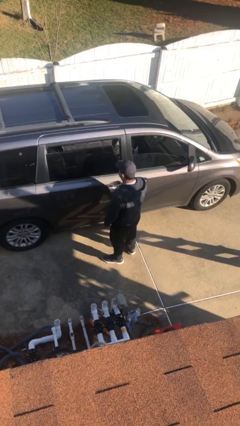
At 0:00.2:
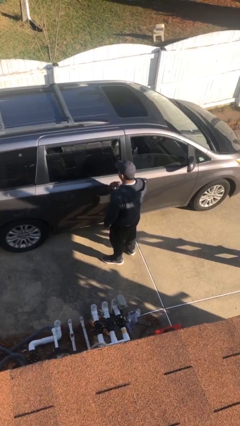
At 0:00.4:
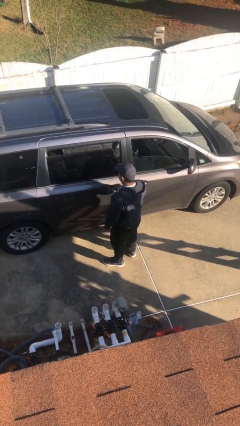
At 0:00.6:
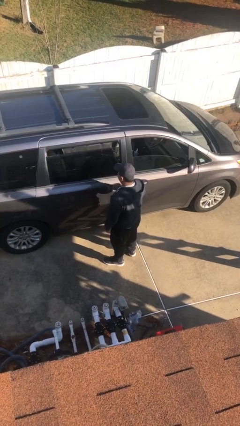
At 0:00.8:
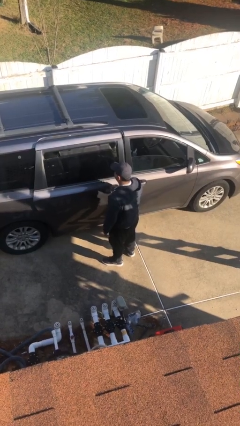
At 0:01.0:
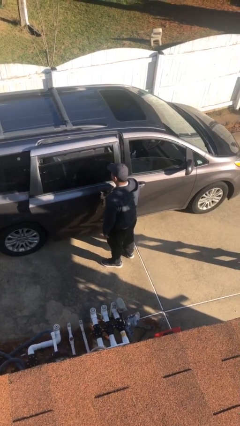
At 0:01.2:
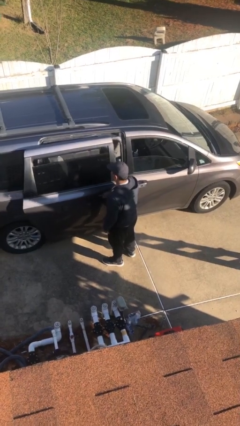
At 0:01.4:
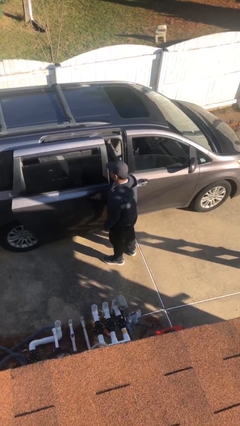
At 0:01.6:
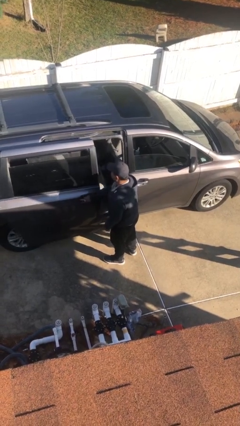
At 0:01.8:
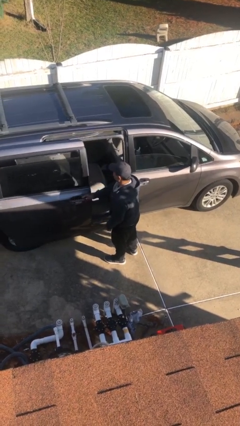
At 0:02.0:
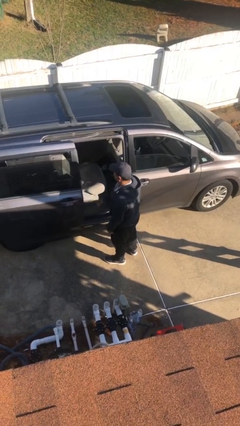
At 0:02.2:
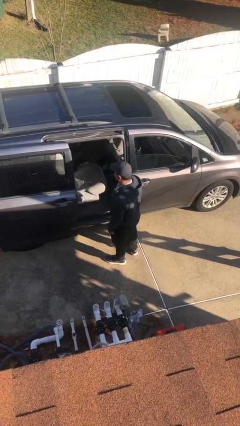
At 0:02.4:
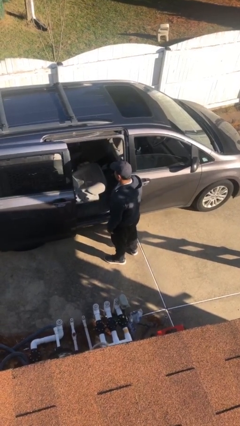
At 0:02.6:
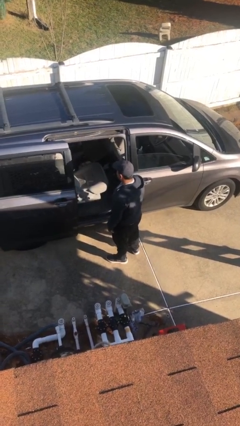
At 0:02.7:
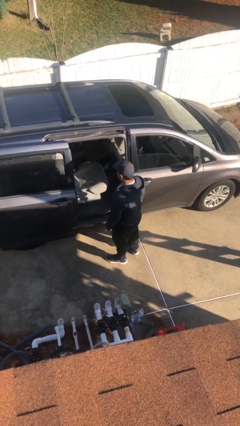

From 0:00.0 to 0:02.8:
person opens car door

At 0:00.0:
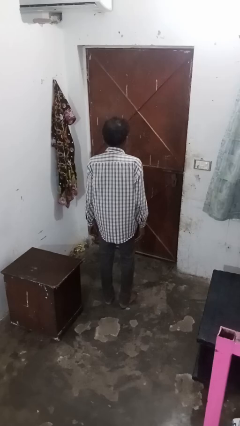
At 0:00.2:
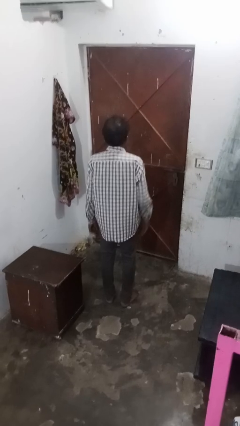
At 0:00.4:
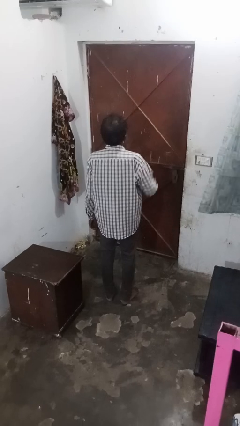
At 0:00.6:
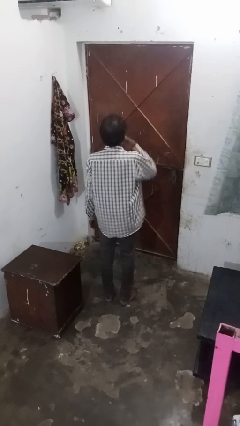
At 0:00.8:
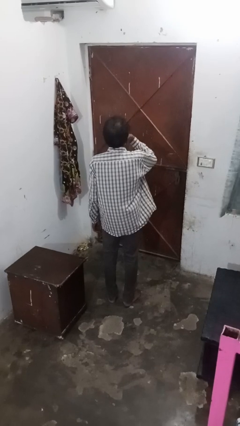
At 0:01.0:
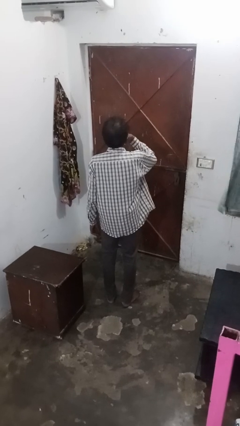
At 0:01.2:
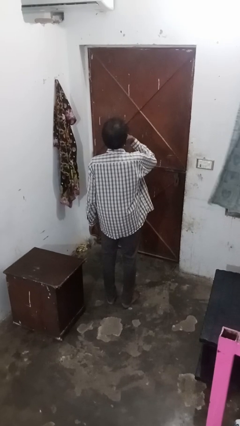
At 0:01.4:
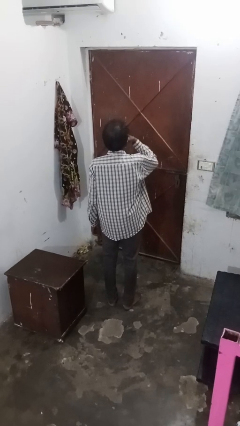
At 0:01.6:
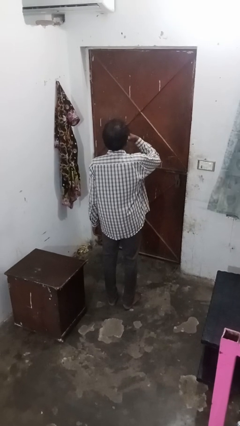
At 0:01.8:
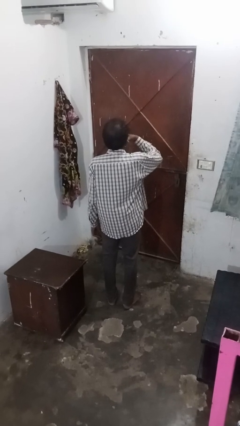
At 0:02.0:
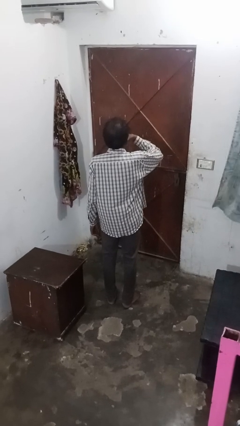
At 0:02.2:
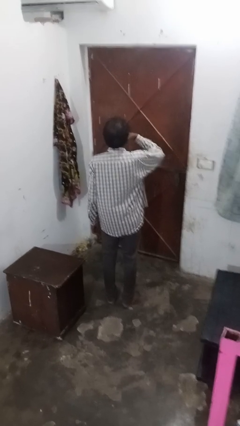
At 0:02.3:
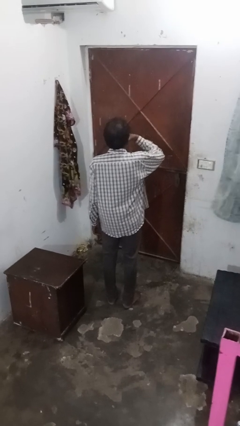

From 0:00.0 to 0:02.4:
person strokes chin

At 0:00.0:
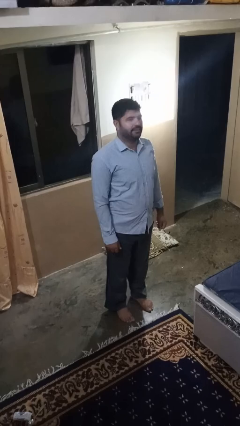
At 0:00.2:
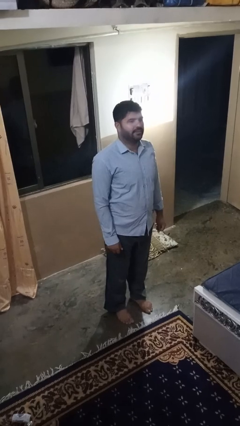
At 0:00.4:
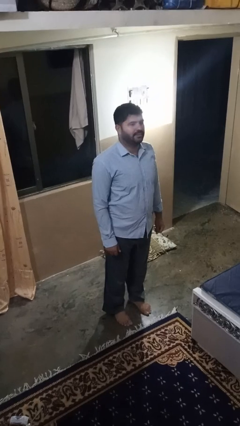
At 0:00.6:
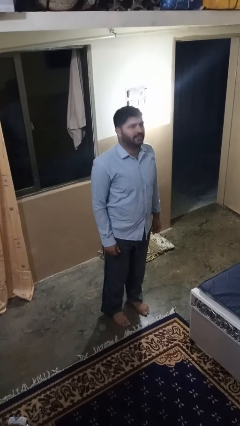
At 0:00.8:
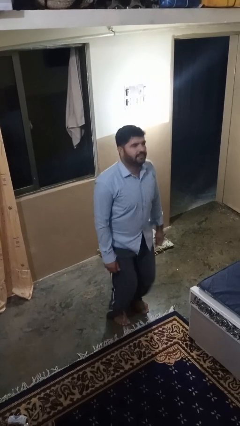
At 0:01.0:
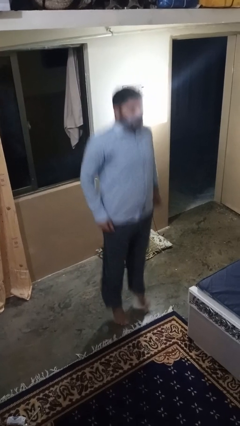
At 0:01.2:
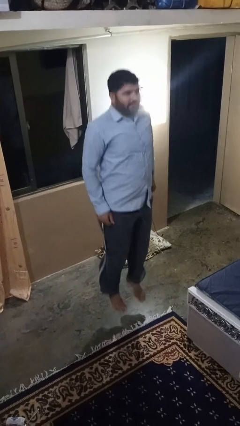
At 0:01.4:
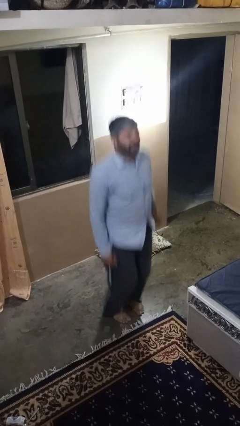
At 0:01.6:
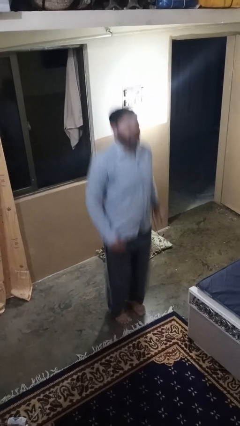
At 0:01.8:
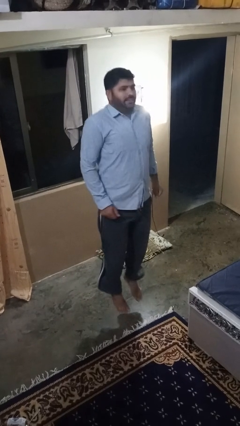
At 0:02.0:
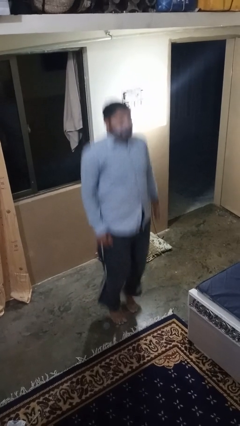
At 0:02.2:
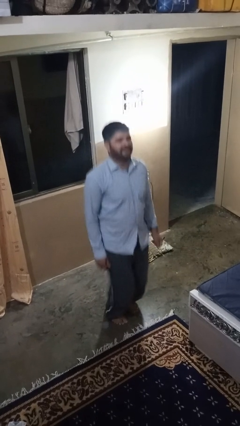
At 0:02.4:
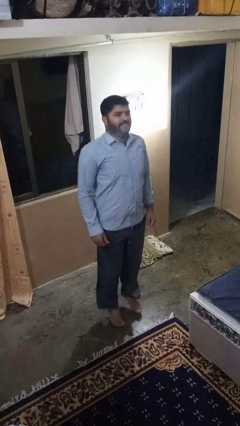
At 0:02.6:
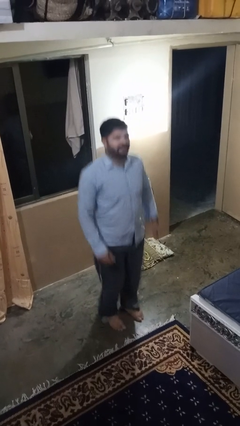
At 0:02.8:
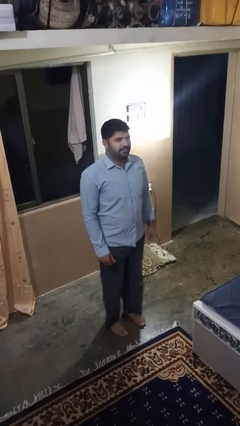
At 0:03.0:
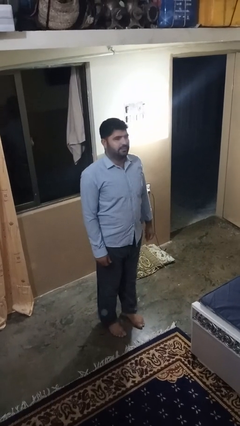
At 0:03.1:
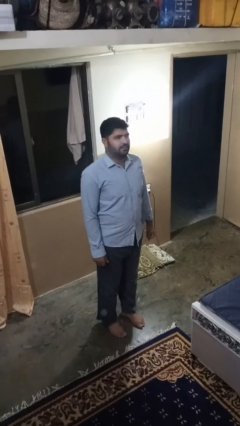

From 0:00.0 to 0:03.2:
person jumps

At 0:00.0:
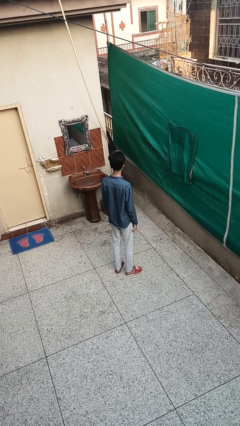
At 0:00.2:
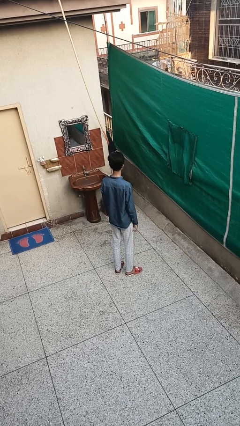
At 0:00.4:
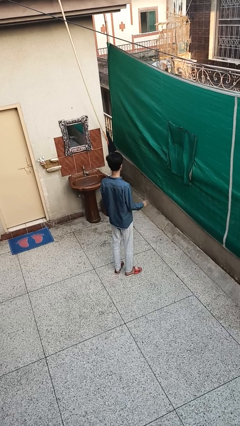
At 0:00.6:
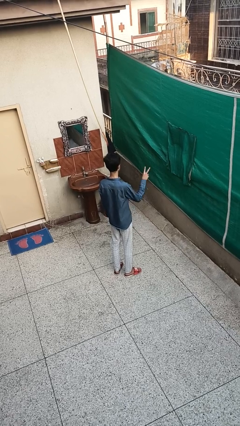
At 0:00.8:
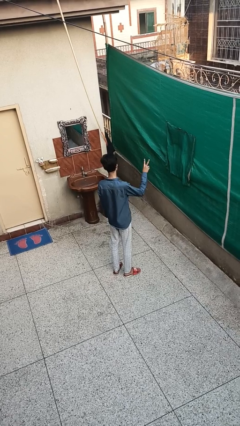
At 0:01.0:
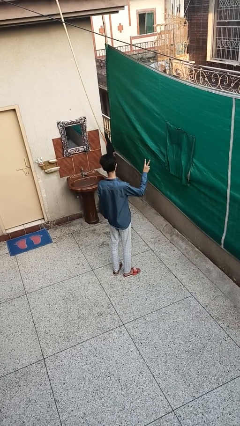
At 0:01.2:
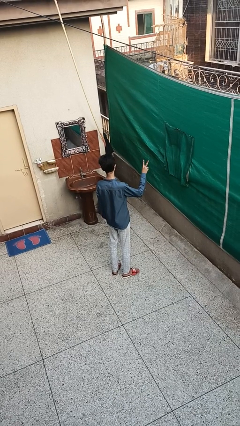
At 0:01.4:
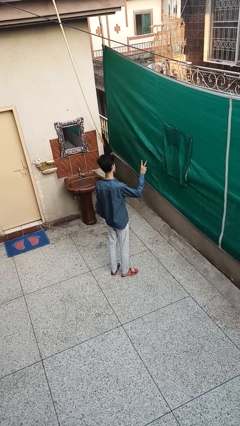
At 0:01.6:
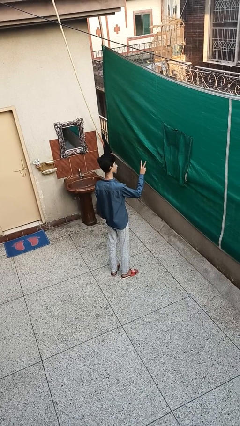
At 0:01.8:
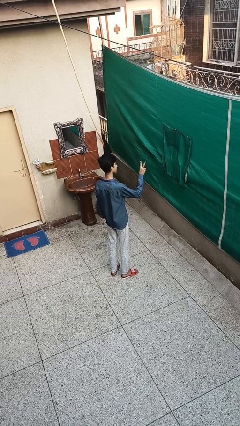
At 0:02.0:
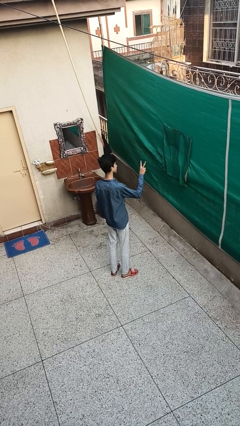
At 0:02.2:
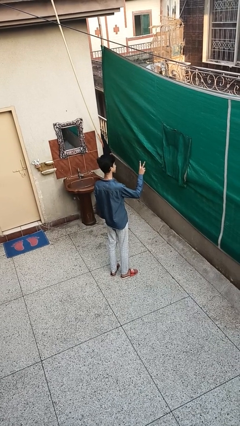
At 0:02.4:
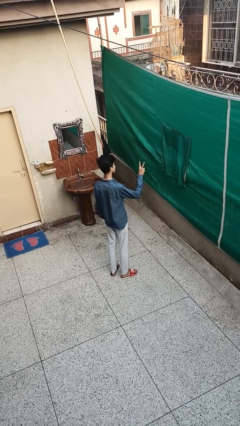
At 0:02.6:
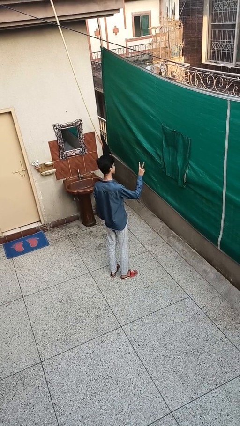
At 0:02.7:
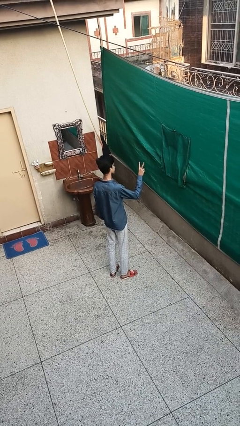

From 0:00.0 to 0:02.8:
person gestures peace

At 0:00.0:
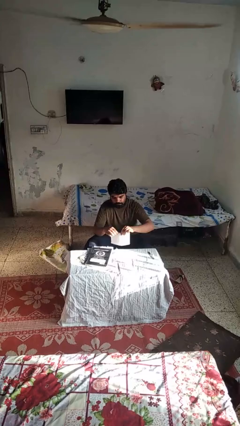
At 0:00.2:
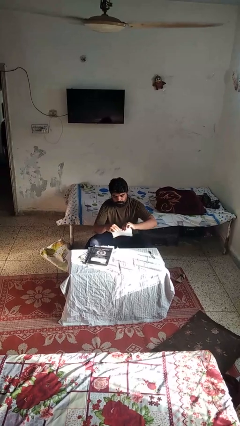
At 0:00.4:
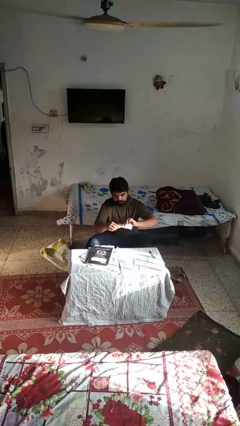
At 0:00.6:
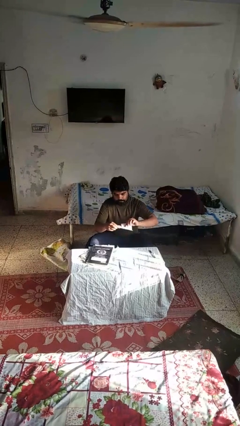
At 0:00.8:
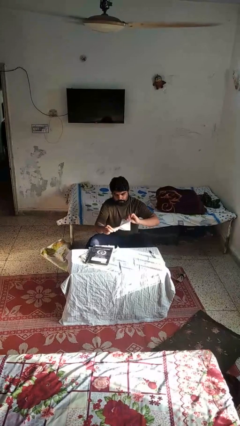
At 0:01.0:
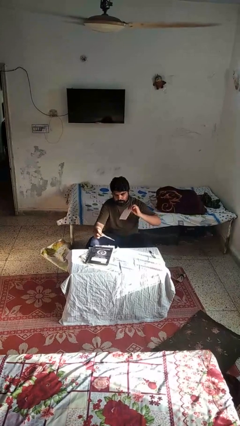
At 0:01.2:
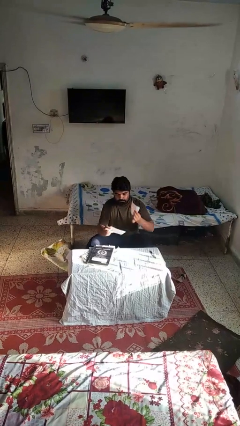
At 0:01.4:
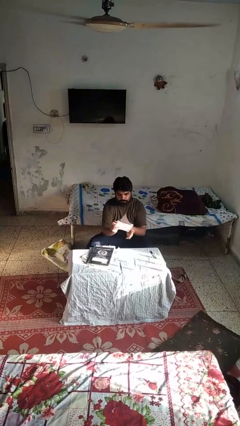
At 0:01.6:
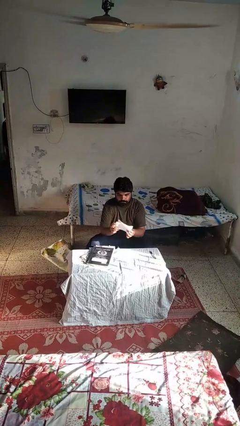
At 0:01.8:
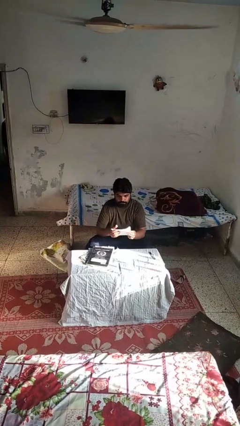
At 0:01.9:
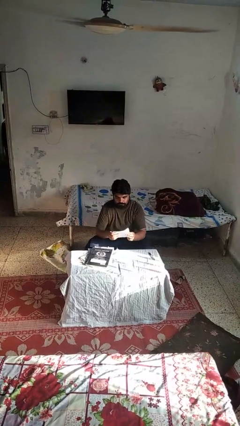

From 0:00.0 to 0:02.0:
person tears paper

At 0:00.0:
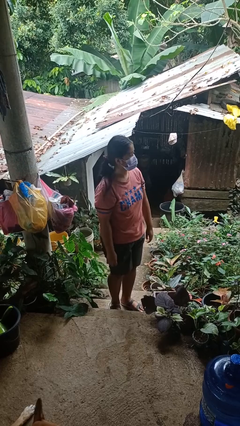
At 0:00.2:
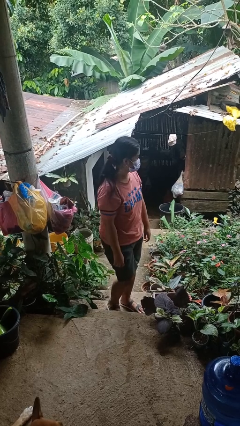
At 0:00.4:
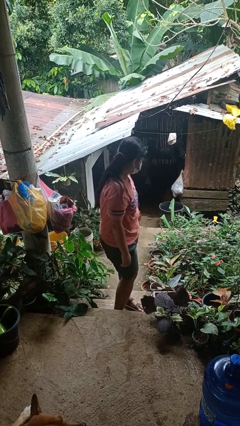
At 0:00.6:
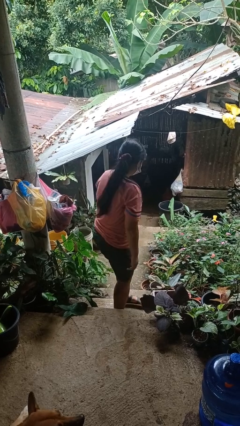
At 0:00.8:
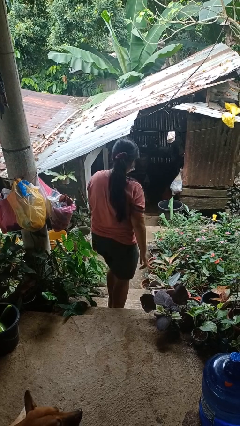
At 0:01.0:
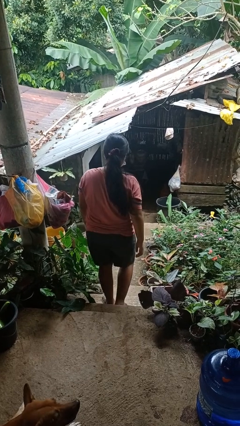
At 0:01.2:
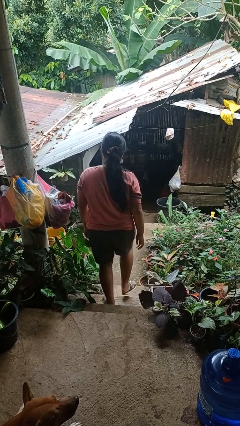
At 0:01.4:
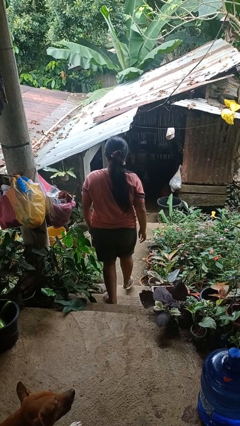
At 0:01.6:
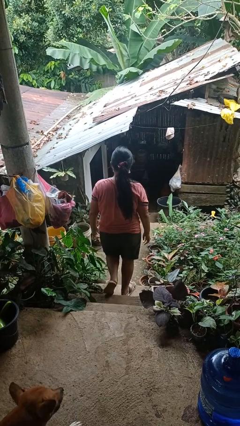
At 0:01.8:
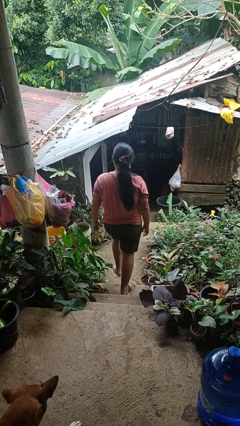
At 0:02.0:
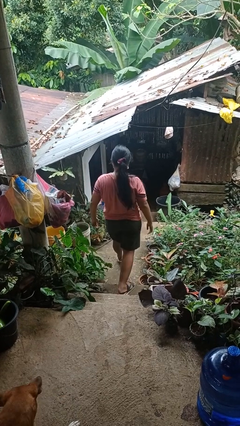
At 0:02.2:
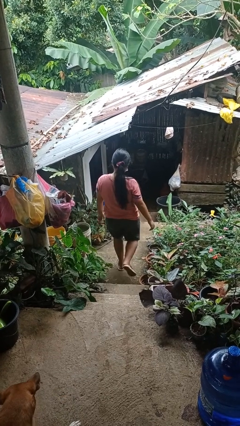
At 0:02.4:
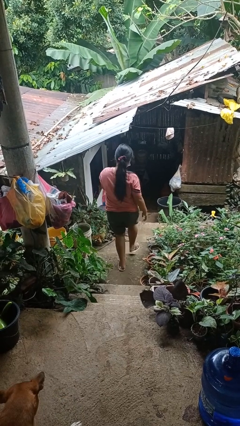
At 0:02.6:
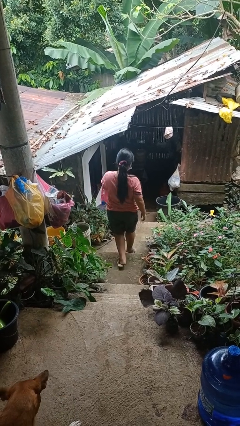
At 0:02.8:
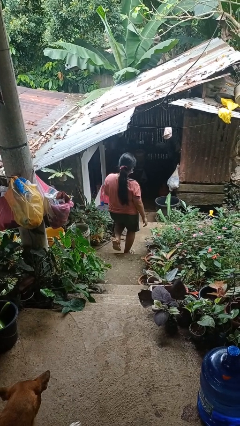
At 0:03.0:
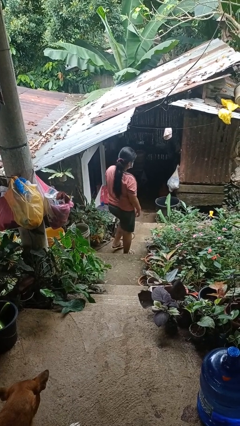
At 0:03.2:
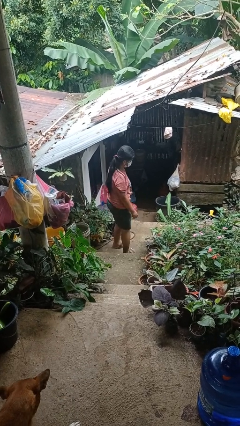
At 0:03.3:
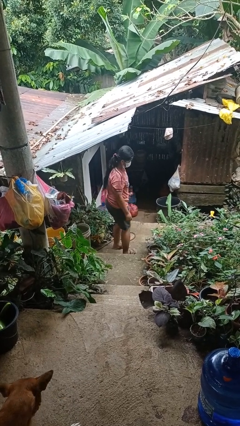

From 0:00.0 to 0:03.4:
person climbs down stairs
